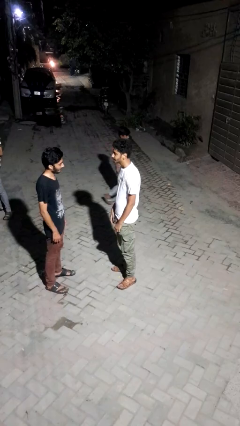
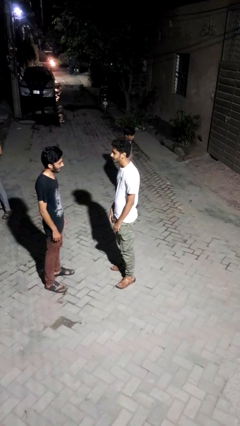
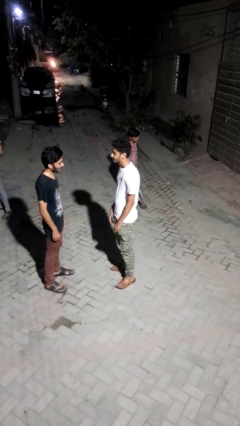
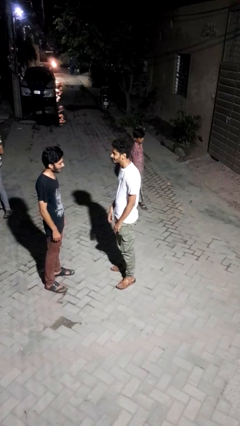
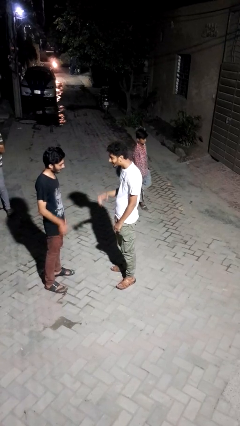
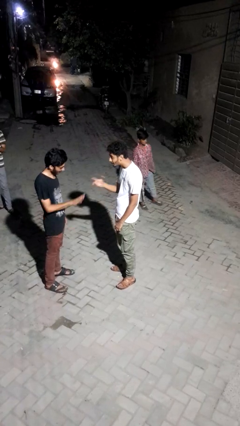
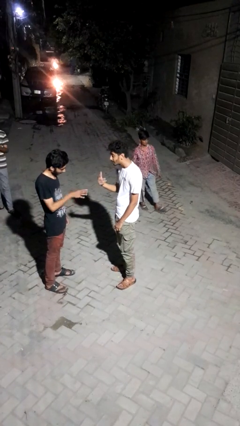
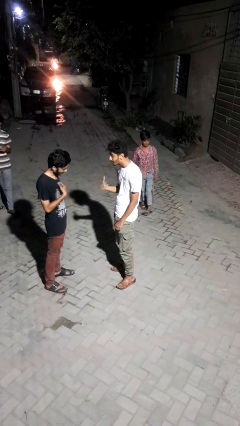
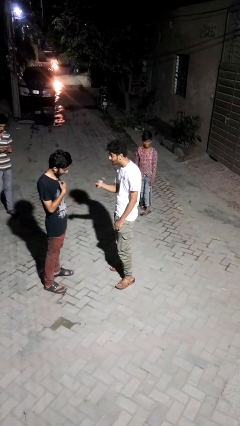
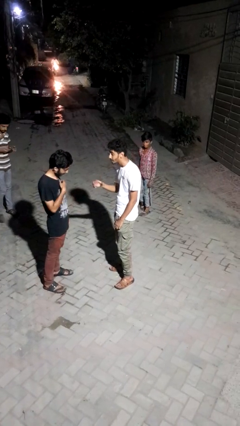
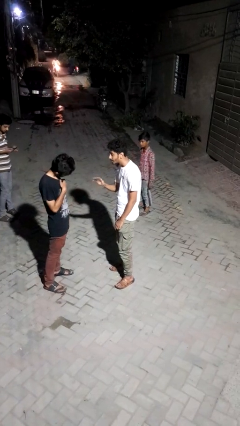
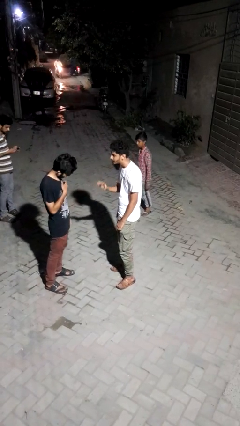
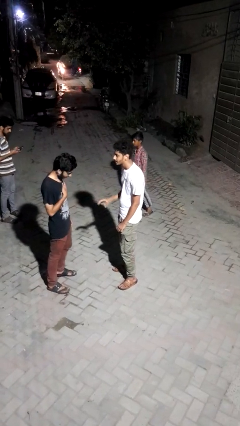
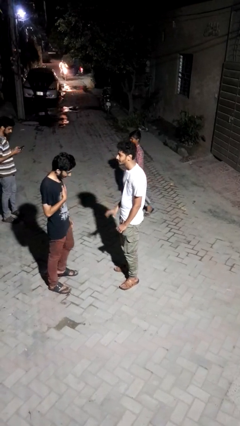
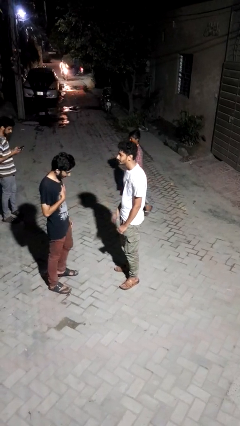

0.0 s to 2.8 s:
person talks to person

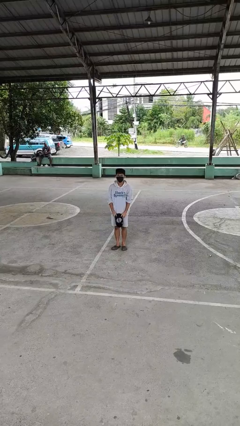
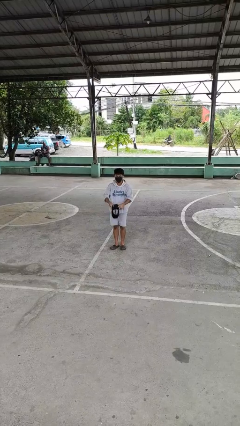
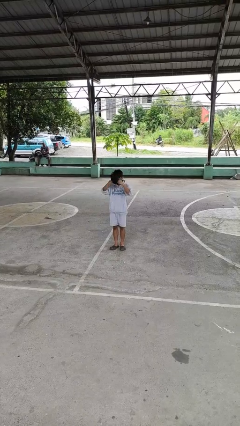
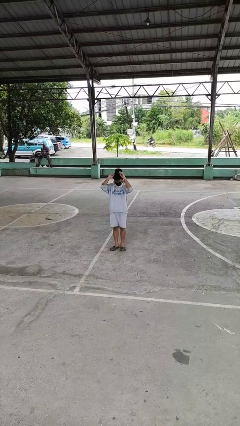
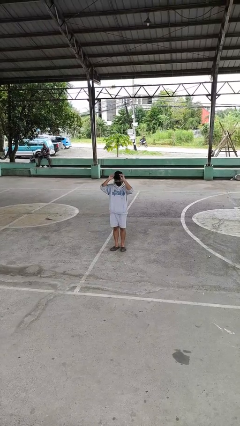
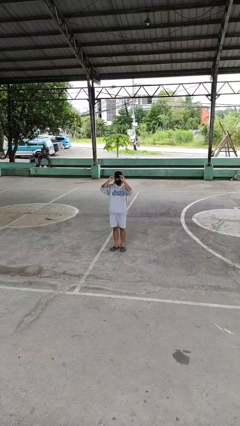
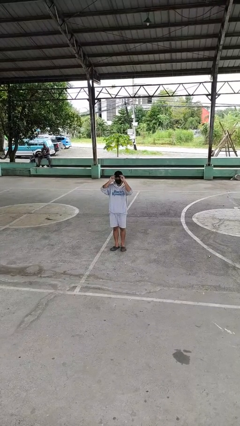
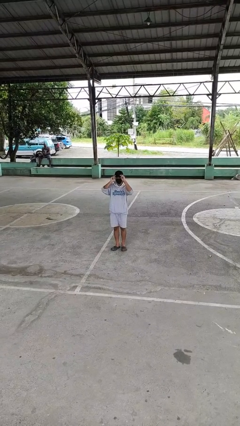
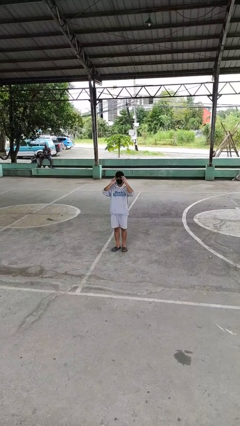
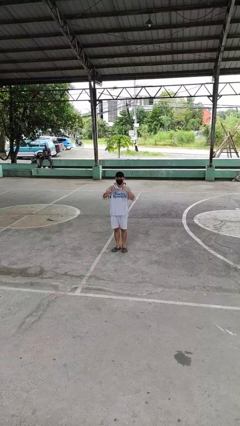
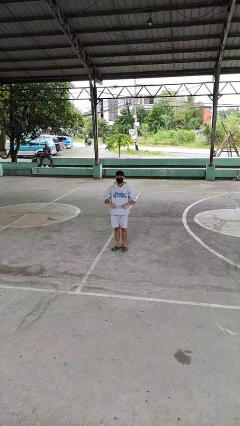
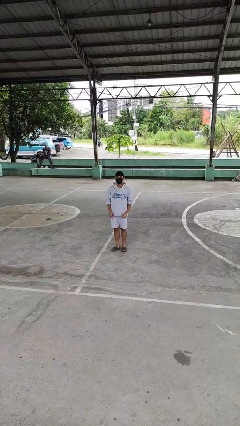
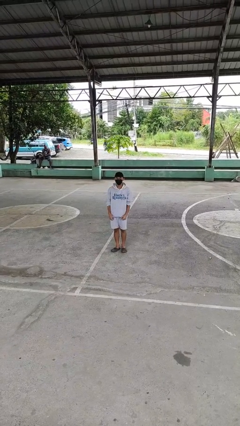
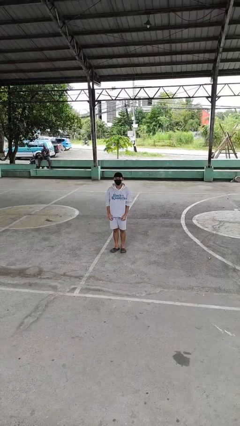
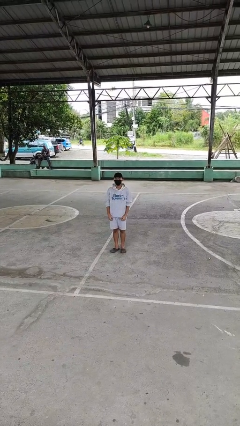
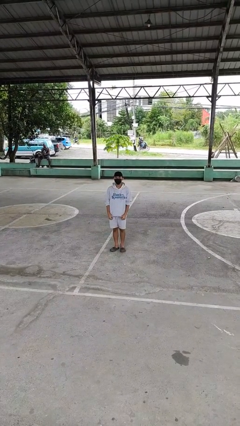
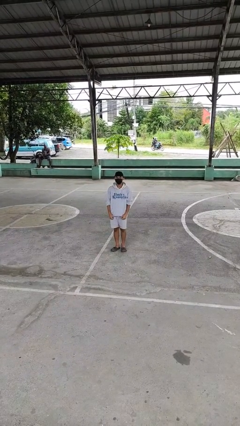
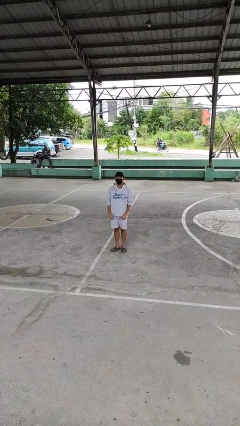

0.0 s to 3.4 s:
person puts on hat

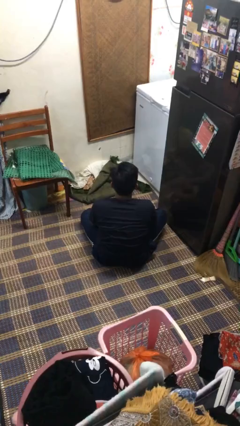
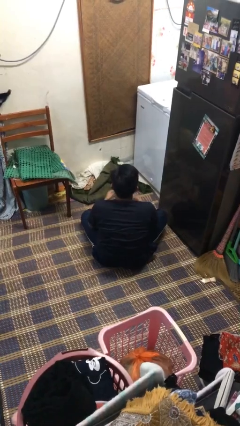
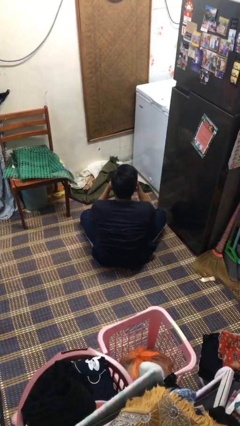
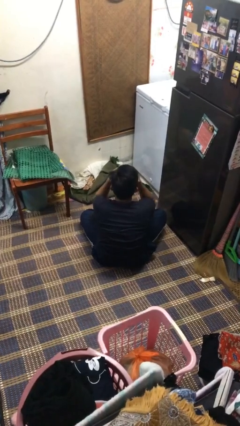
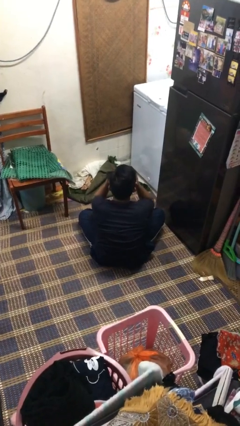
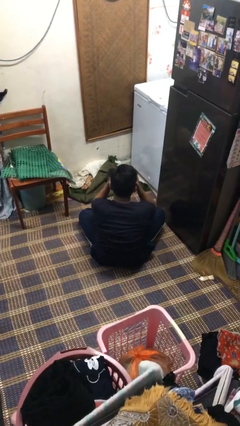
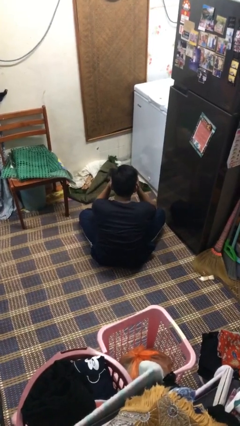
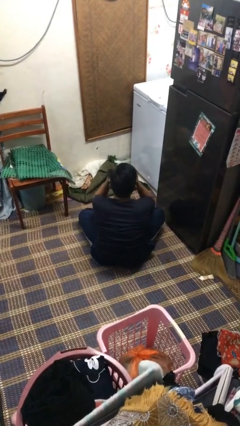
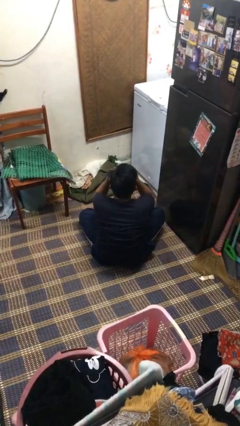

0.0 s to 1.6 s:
person covers face with hands

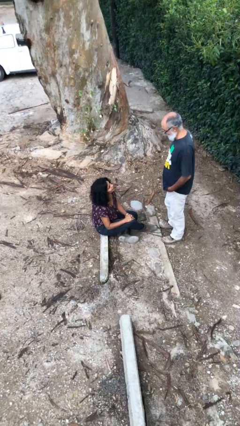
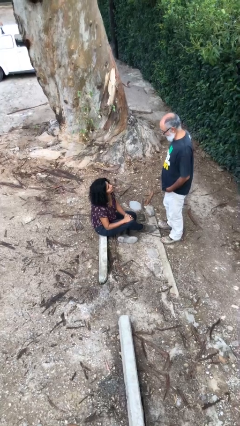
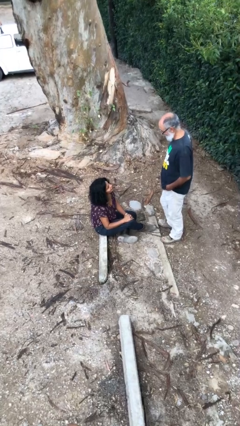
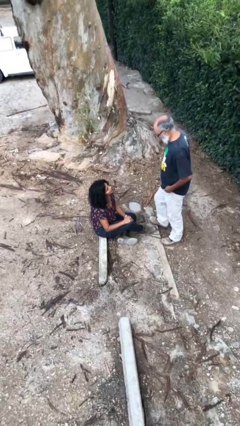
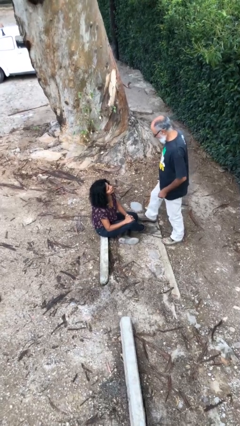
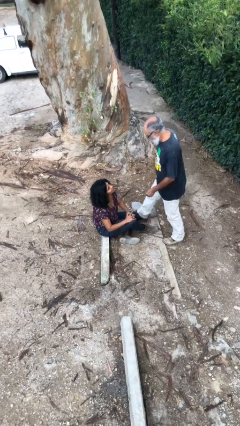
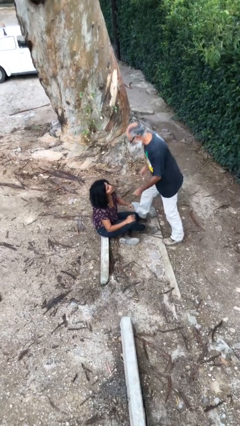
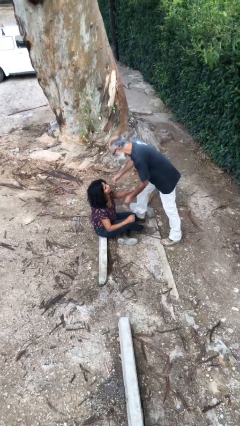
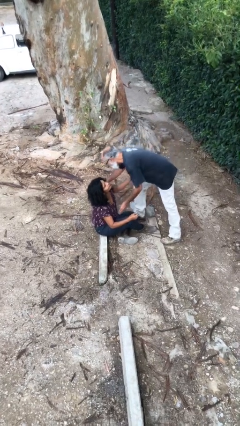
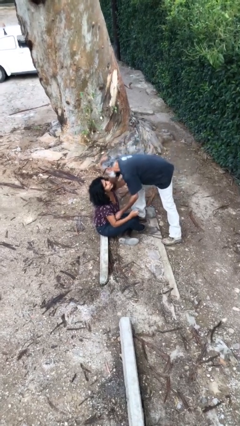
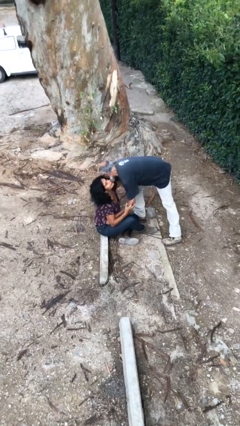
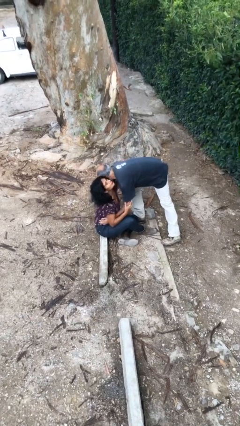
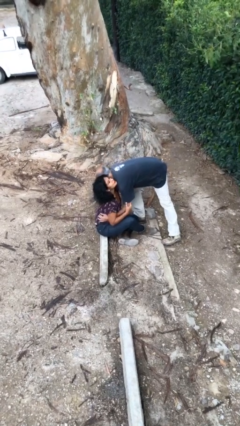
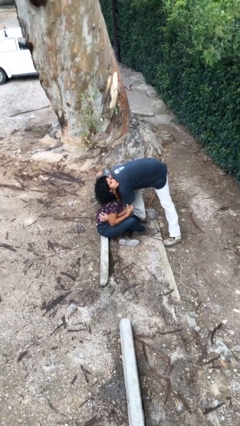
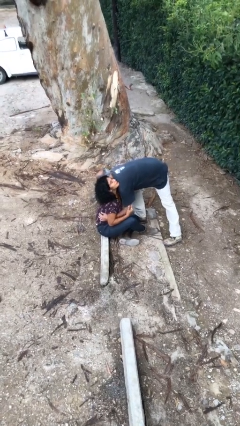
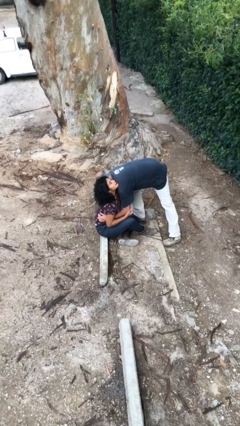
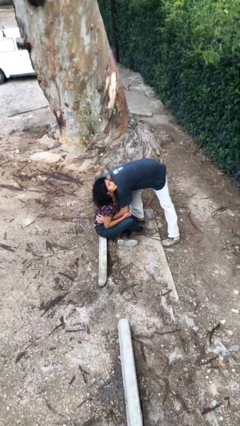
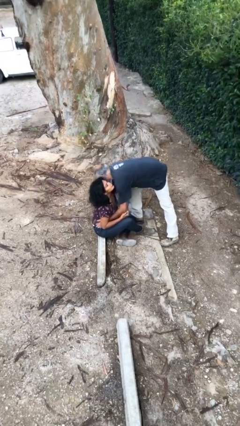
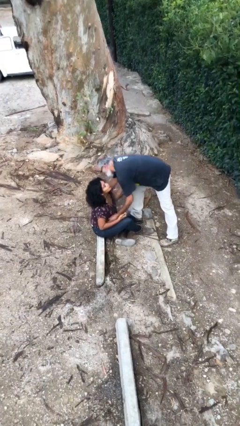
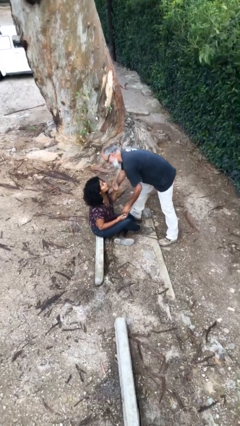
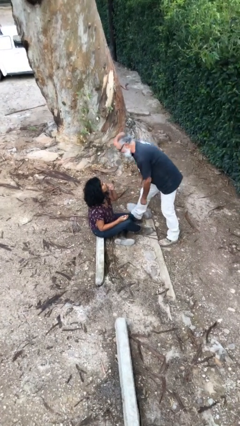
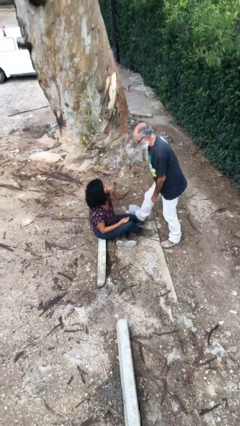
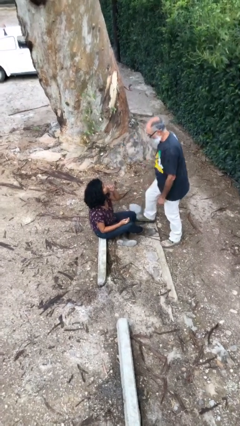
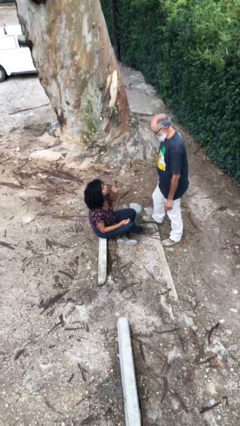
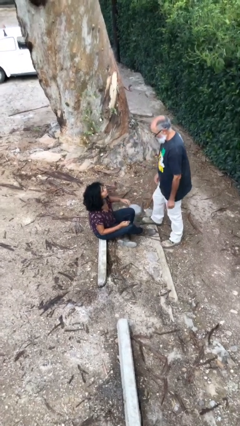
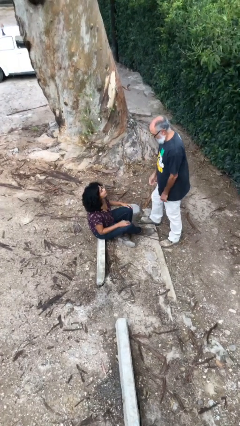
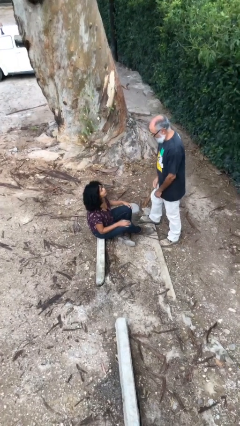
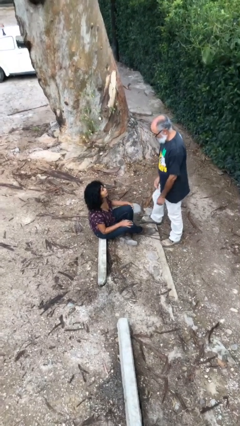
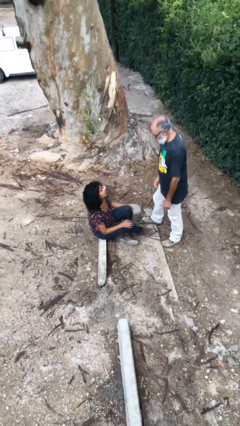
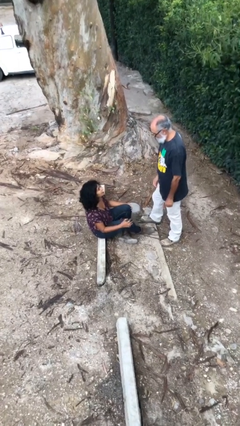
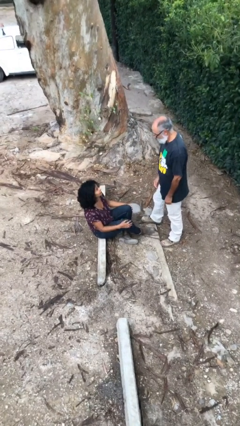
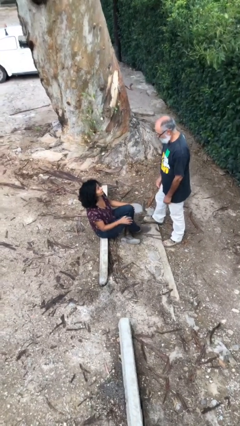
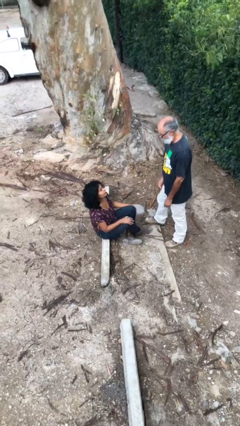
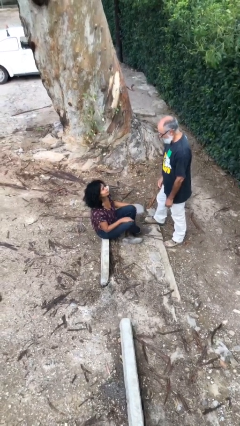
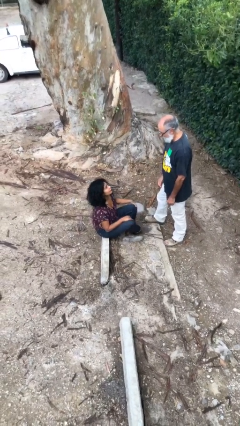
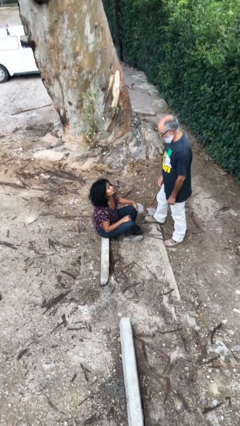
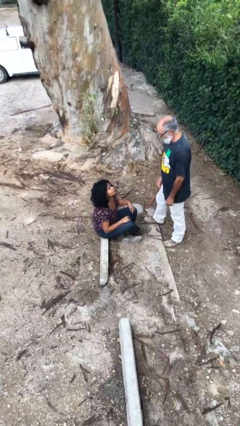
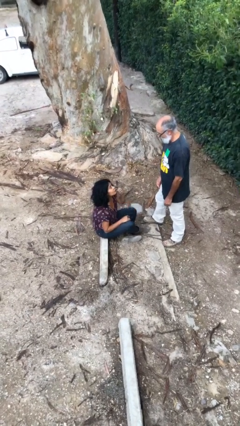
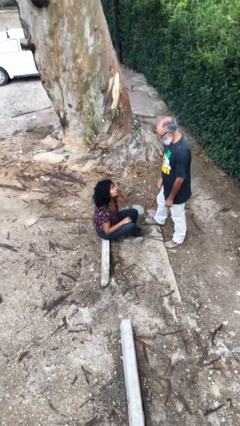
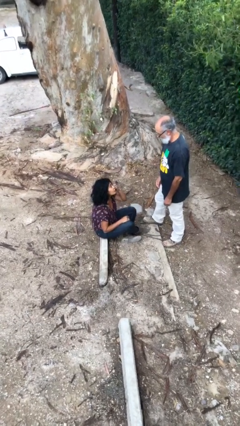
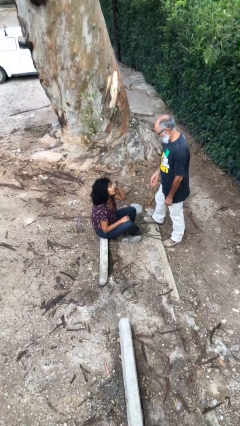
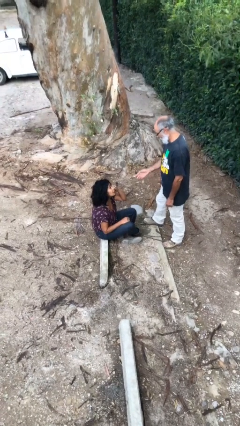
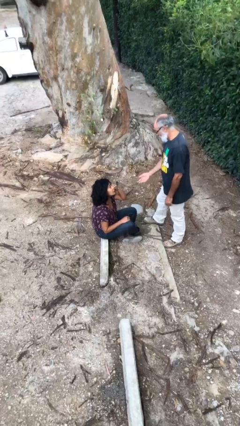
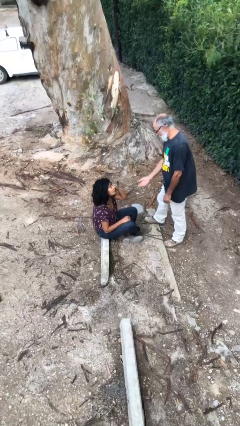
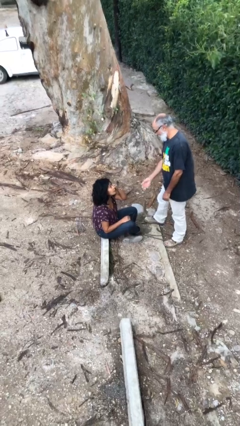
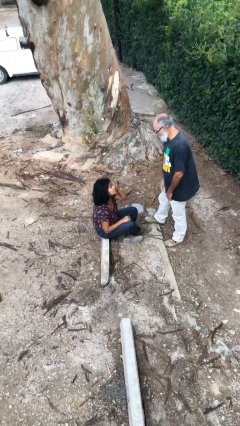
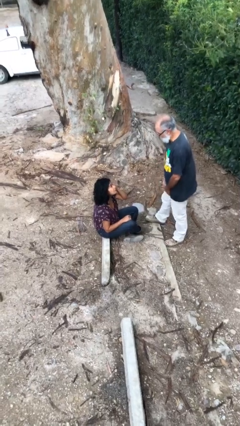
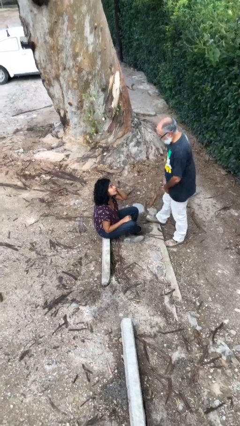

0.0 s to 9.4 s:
person embraces person

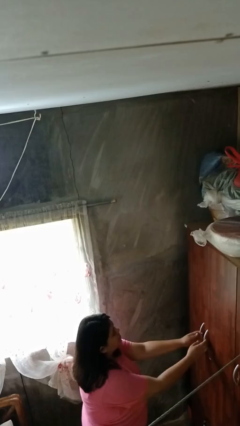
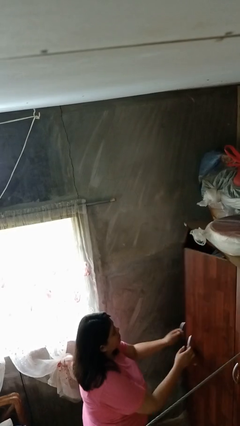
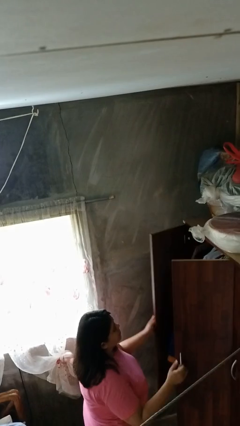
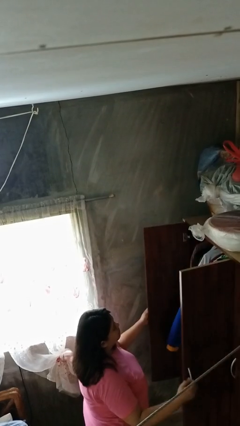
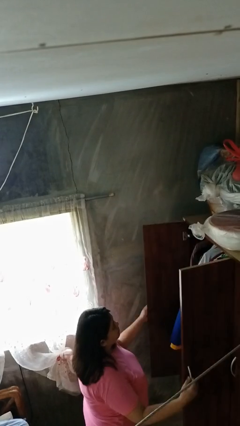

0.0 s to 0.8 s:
person opens closet door
